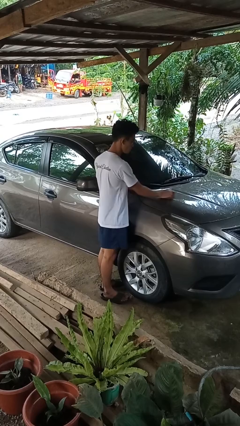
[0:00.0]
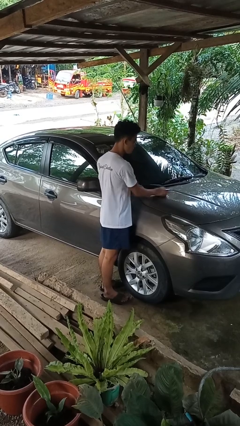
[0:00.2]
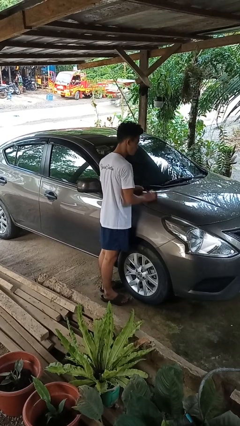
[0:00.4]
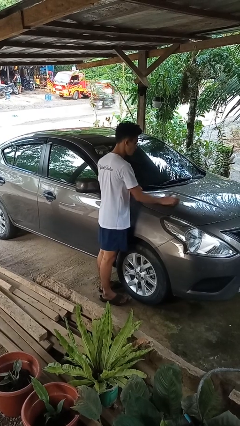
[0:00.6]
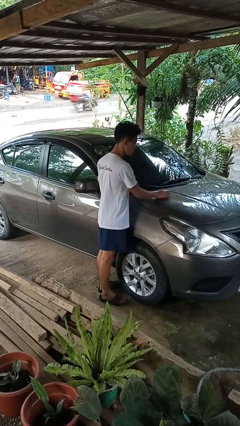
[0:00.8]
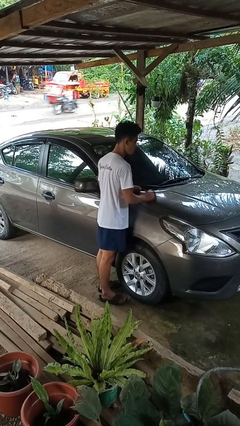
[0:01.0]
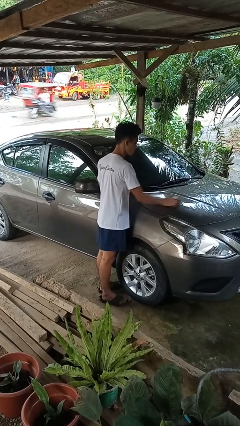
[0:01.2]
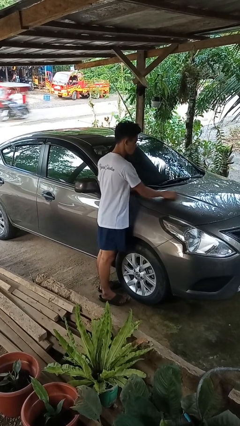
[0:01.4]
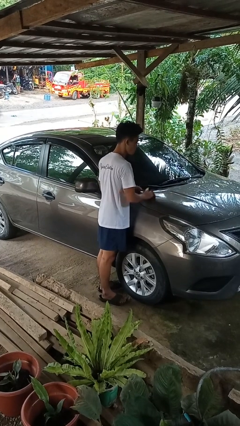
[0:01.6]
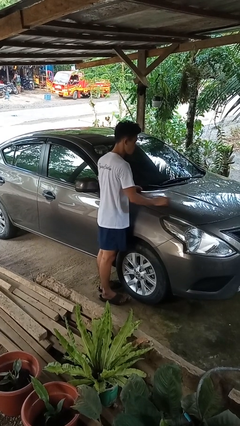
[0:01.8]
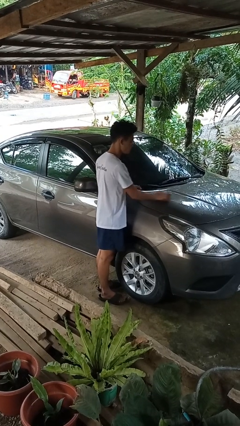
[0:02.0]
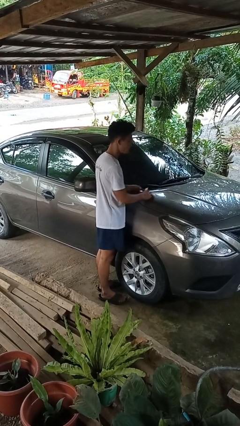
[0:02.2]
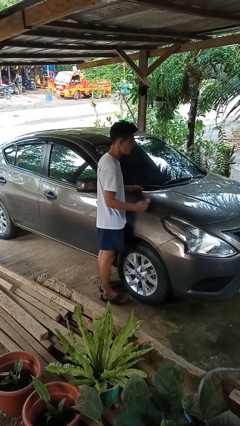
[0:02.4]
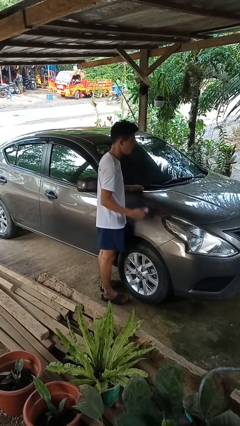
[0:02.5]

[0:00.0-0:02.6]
person polishes car with rag

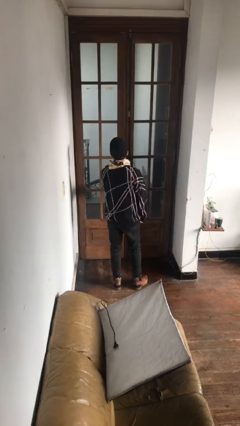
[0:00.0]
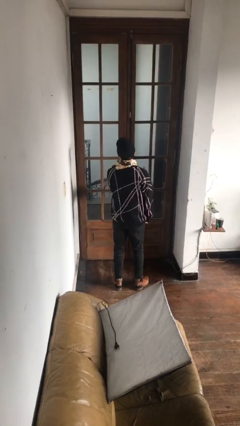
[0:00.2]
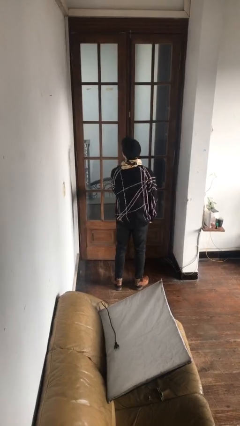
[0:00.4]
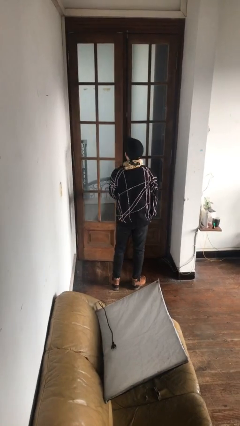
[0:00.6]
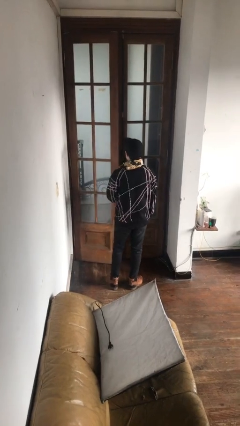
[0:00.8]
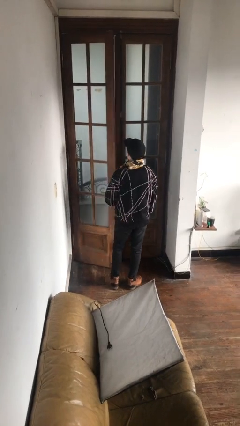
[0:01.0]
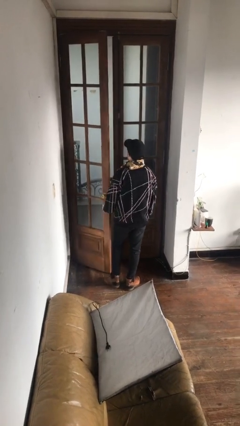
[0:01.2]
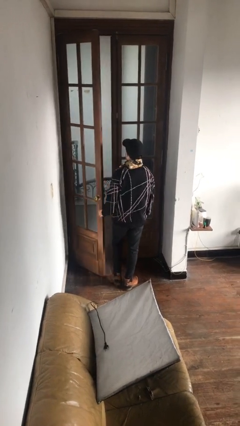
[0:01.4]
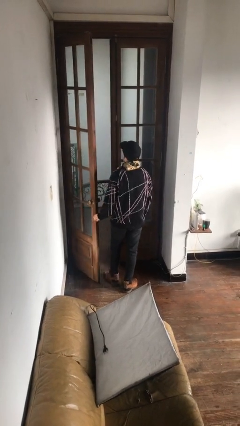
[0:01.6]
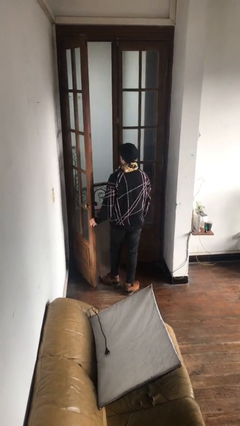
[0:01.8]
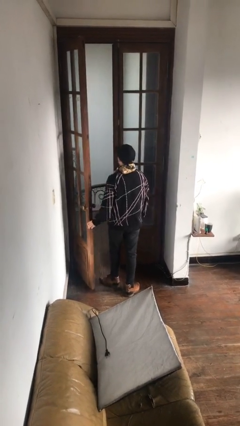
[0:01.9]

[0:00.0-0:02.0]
person opens facility door

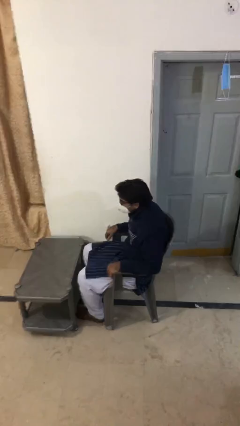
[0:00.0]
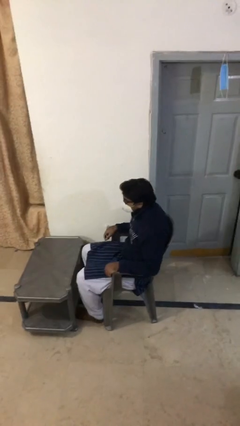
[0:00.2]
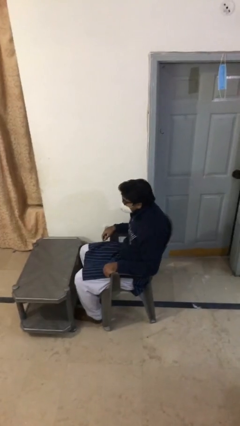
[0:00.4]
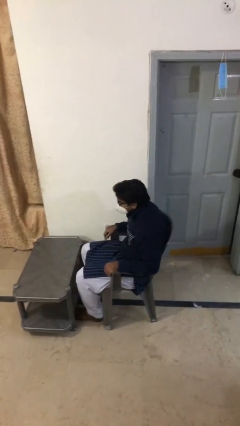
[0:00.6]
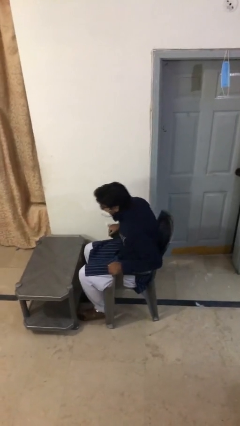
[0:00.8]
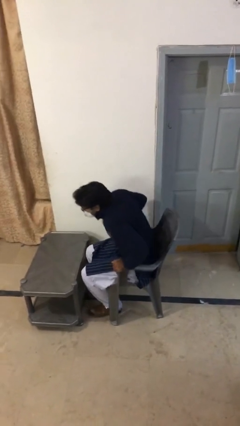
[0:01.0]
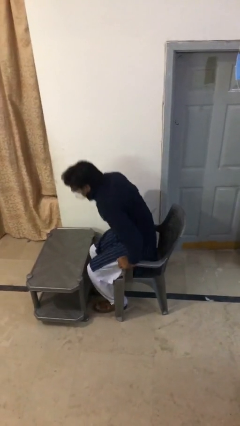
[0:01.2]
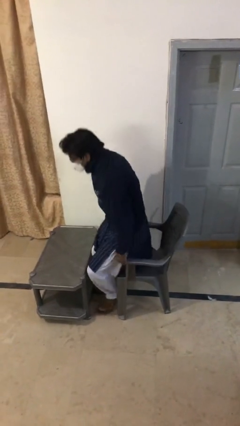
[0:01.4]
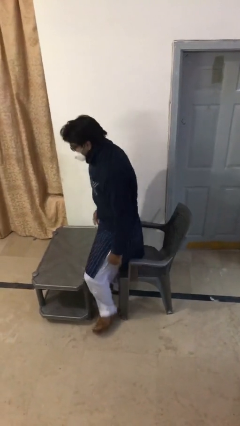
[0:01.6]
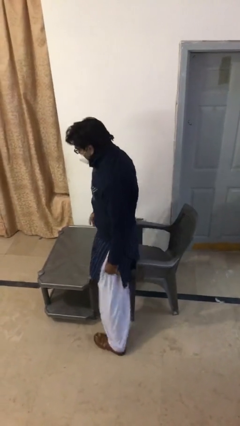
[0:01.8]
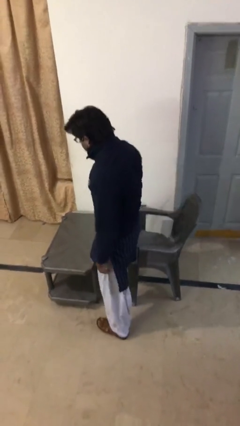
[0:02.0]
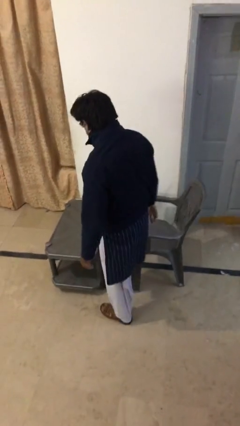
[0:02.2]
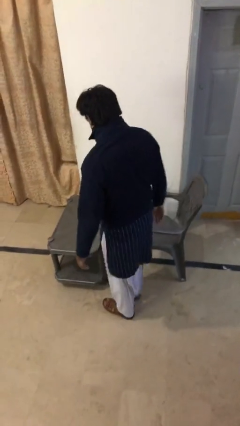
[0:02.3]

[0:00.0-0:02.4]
person stands up

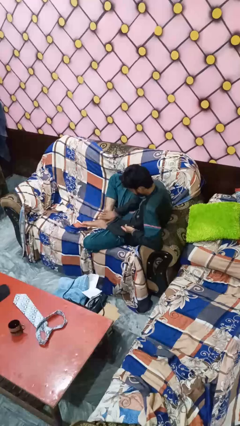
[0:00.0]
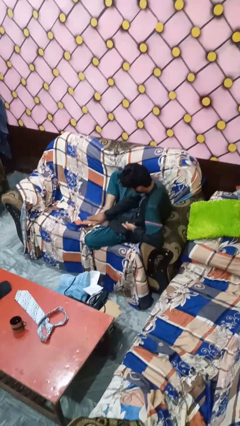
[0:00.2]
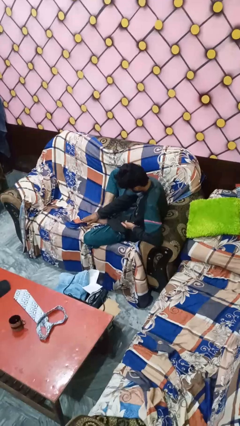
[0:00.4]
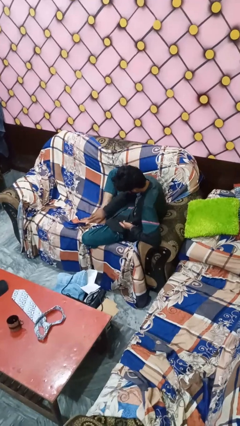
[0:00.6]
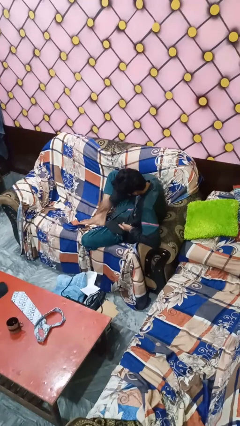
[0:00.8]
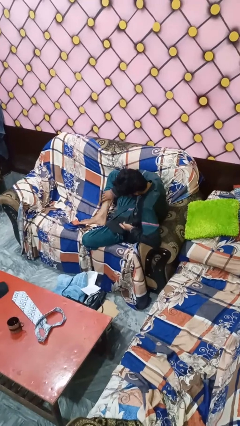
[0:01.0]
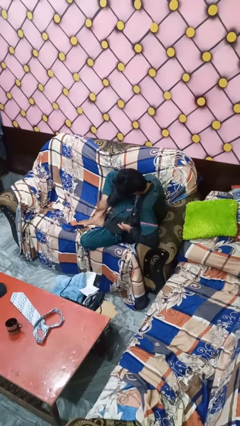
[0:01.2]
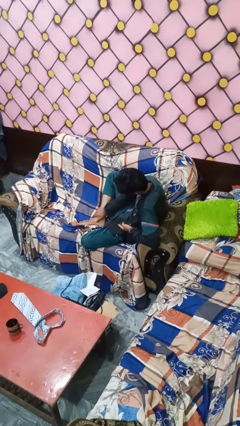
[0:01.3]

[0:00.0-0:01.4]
person rubs foot

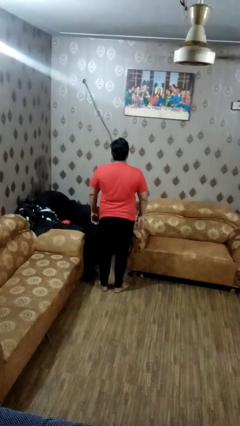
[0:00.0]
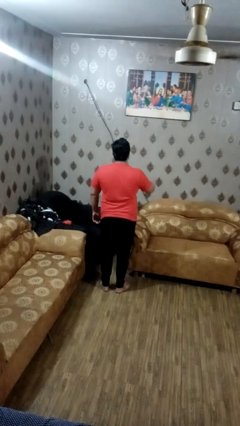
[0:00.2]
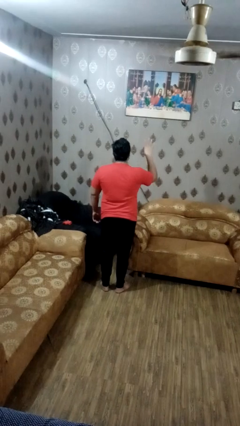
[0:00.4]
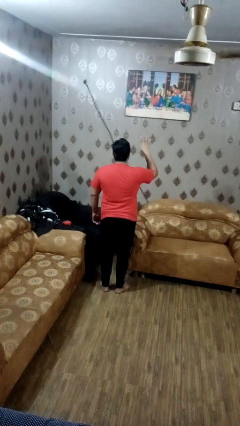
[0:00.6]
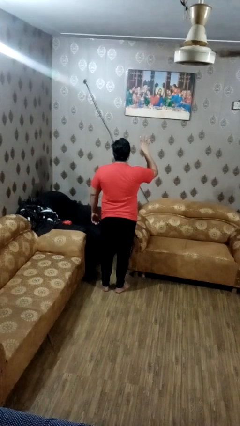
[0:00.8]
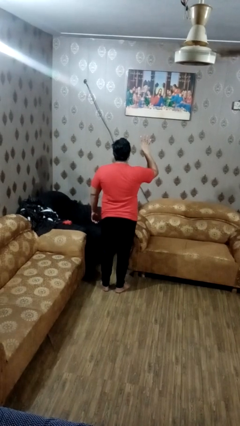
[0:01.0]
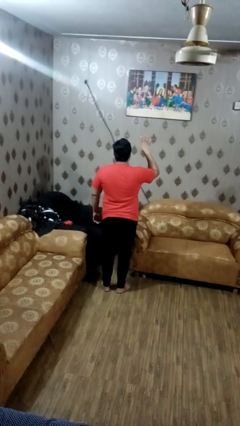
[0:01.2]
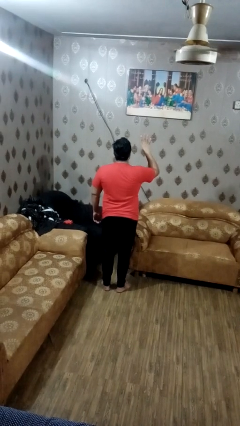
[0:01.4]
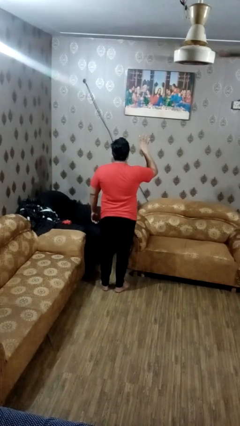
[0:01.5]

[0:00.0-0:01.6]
person gestures number four

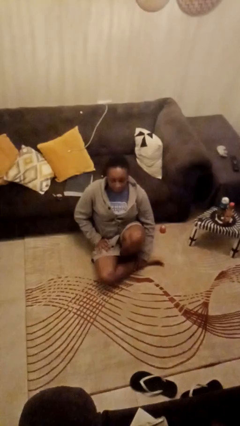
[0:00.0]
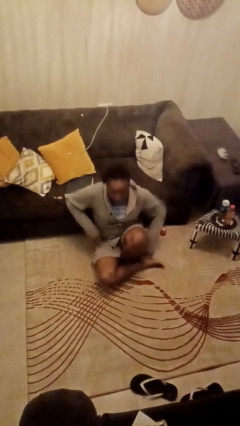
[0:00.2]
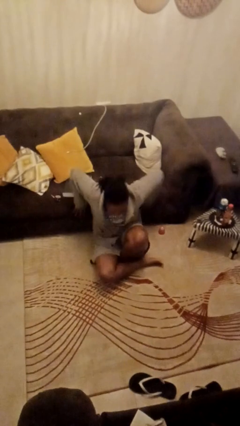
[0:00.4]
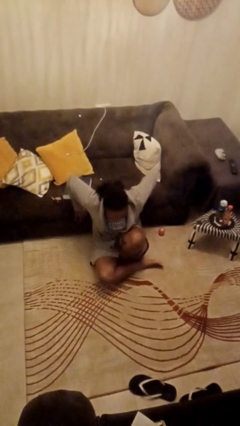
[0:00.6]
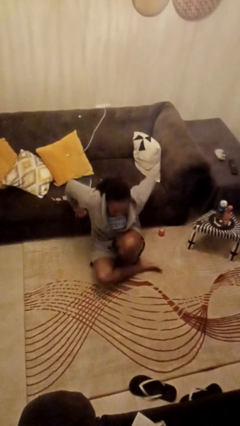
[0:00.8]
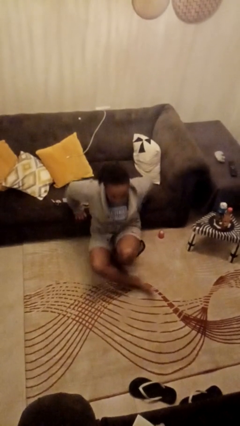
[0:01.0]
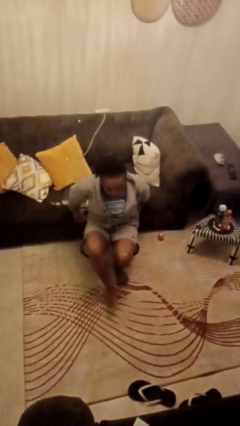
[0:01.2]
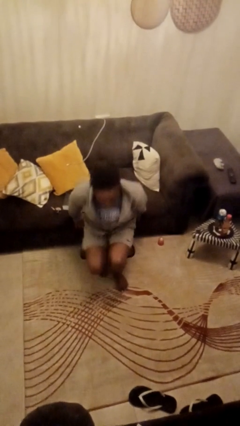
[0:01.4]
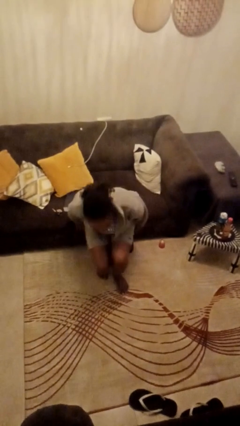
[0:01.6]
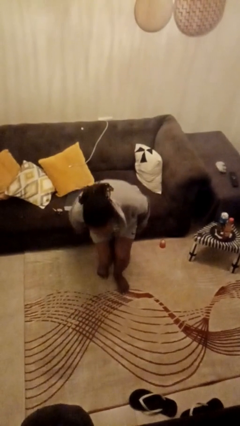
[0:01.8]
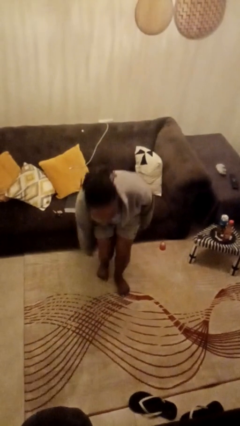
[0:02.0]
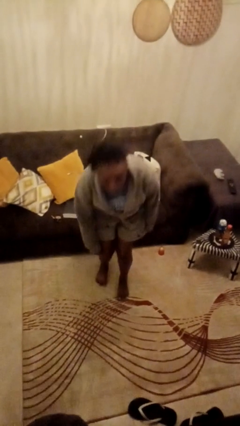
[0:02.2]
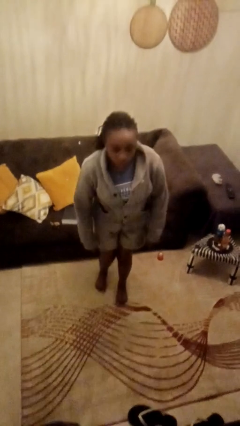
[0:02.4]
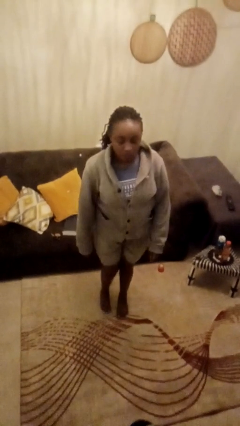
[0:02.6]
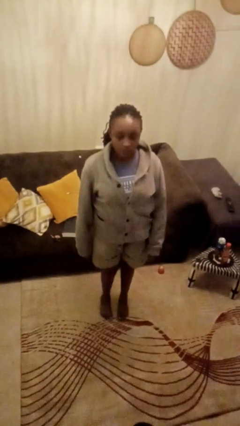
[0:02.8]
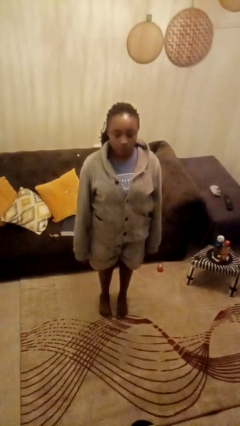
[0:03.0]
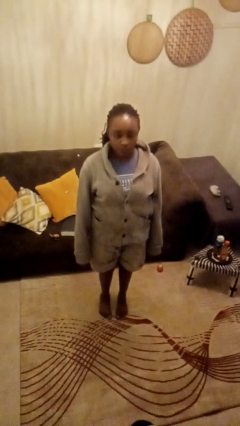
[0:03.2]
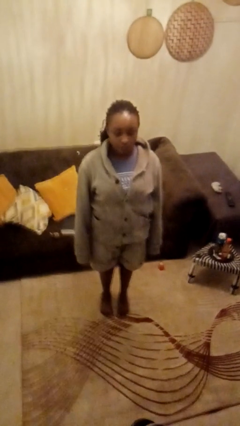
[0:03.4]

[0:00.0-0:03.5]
person stands up from floor

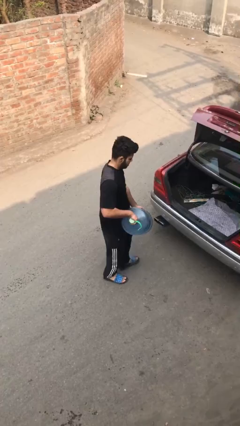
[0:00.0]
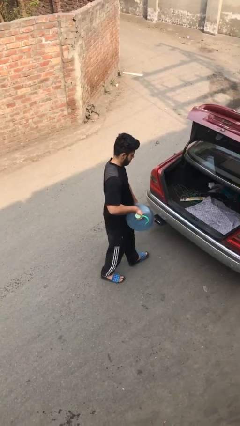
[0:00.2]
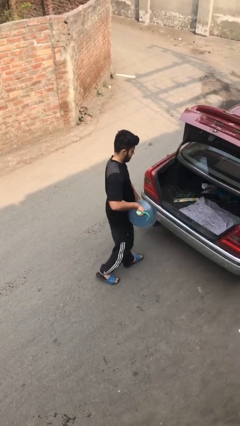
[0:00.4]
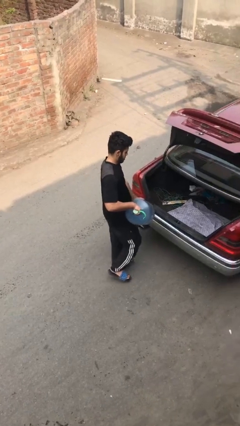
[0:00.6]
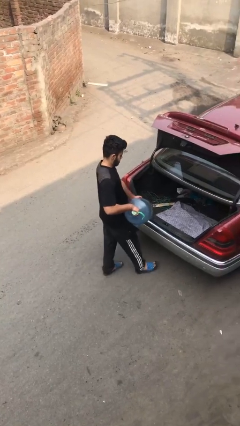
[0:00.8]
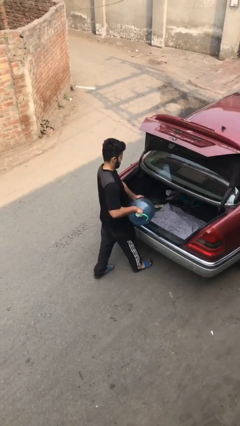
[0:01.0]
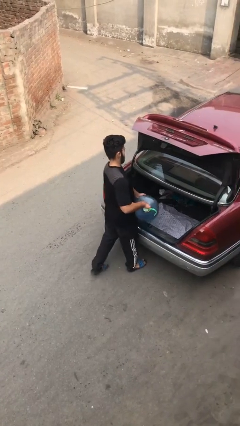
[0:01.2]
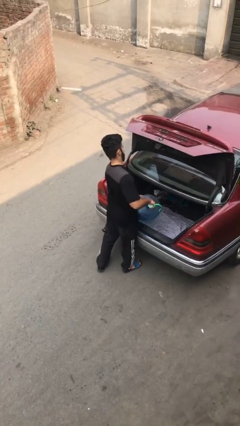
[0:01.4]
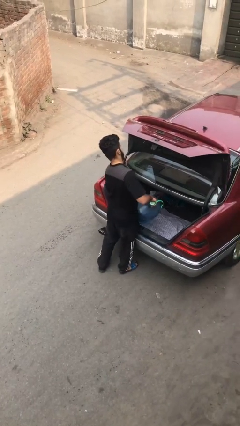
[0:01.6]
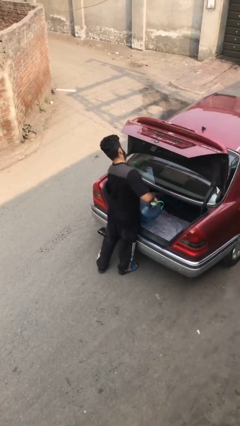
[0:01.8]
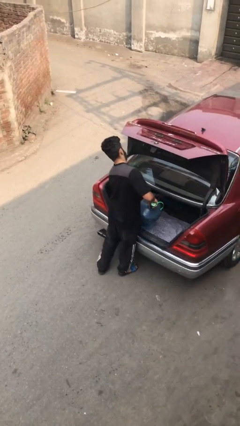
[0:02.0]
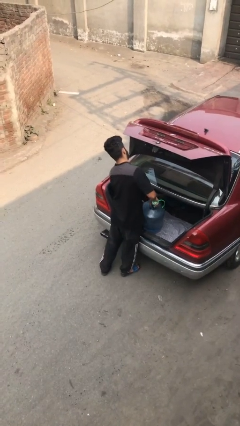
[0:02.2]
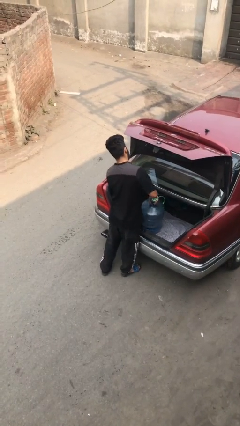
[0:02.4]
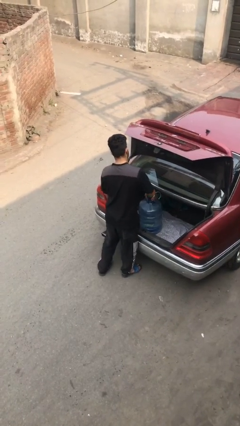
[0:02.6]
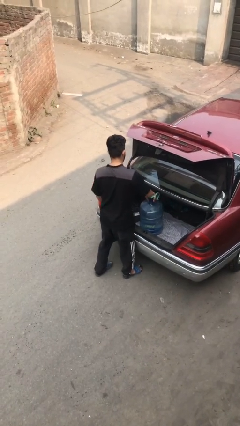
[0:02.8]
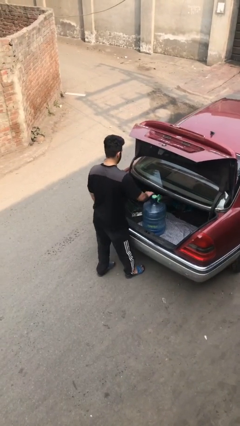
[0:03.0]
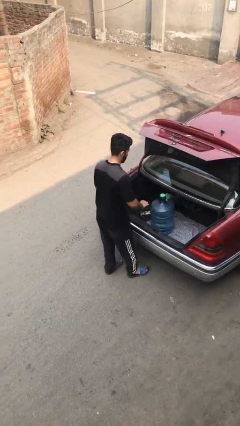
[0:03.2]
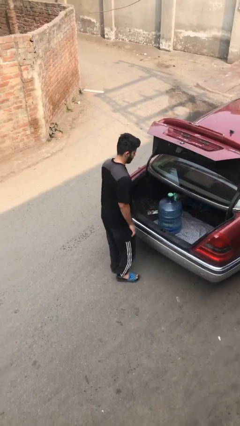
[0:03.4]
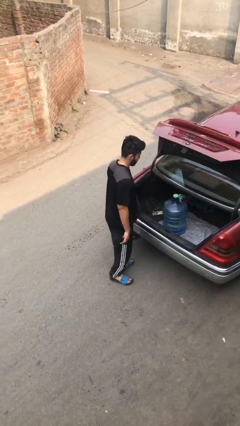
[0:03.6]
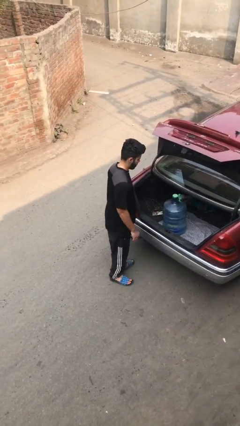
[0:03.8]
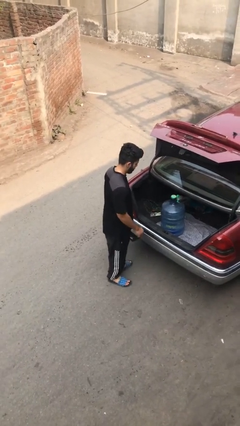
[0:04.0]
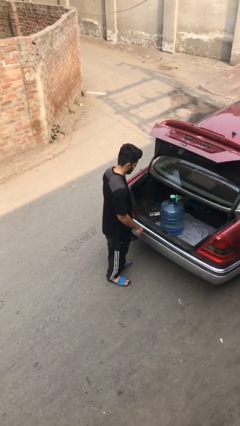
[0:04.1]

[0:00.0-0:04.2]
person loads car
